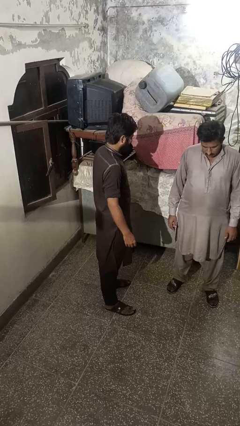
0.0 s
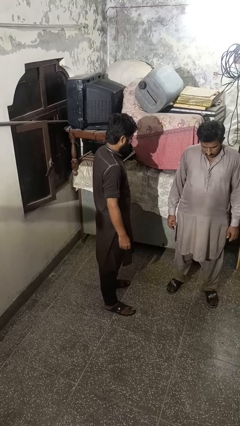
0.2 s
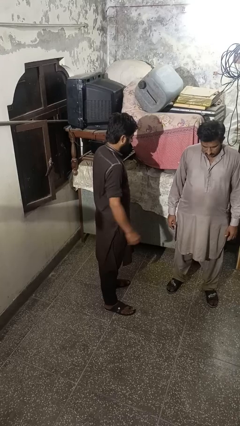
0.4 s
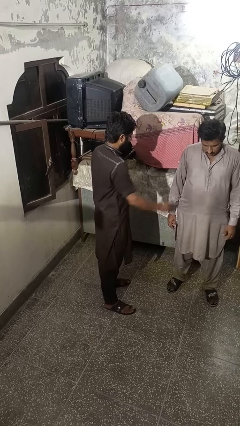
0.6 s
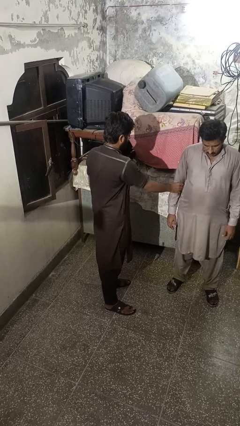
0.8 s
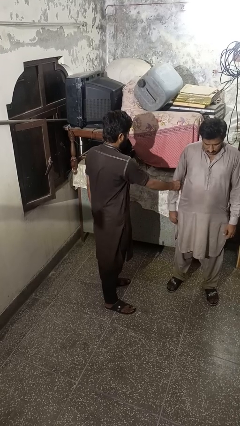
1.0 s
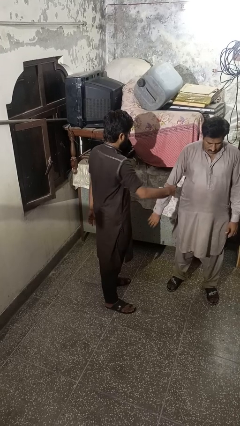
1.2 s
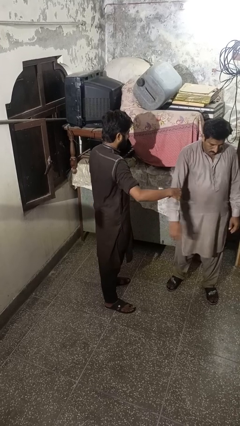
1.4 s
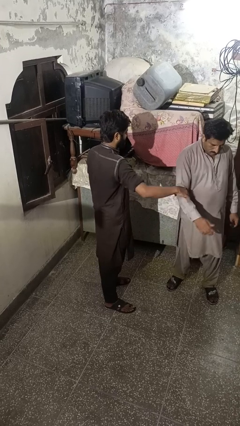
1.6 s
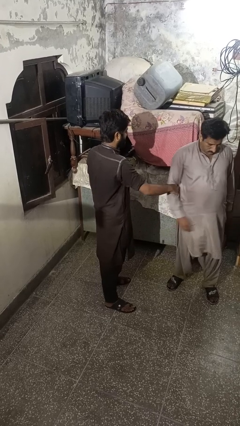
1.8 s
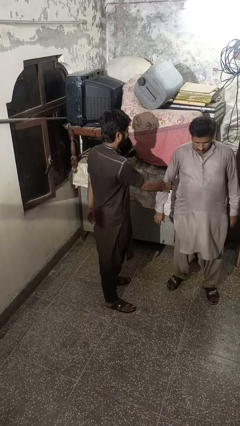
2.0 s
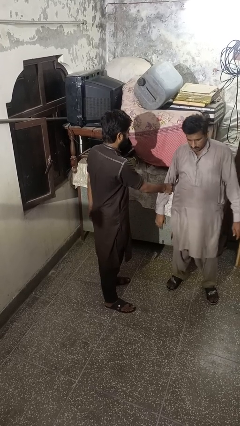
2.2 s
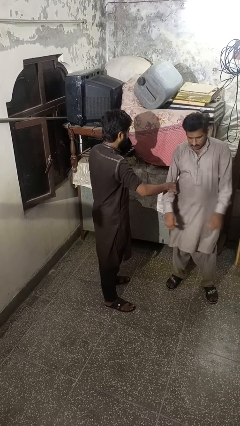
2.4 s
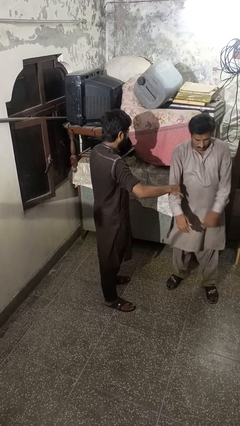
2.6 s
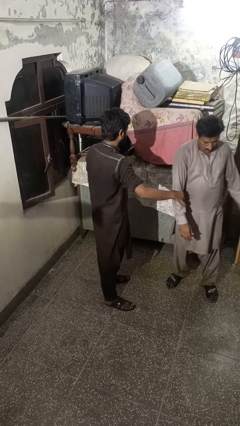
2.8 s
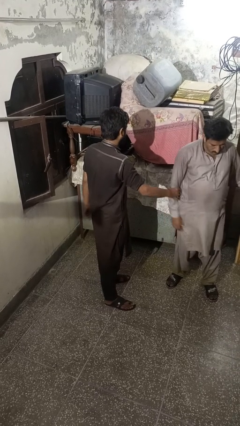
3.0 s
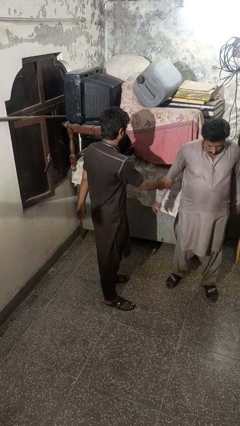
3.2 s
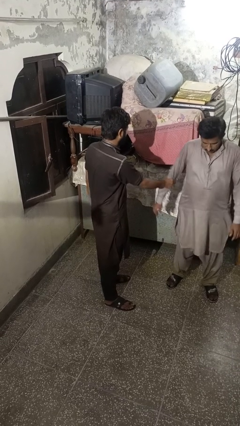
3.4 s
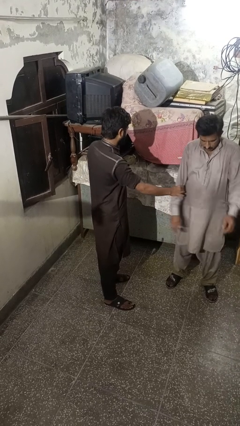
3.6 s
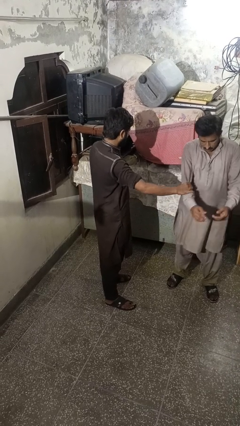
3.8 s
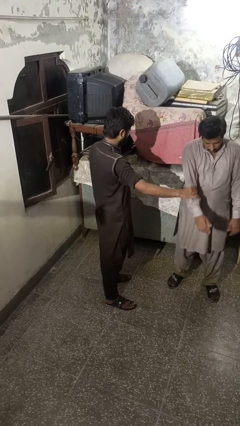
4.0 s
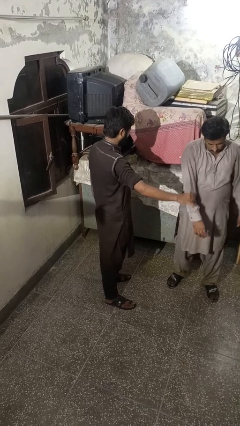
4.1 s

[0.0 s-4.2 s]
person grabs person by forearm

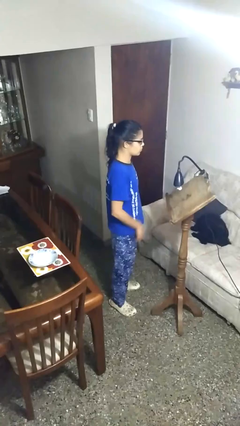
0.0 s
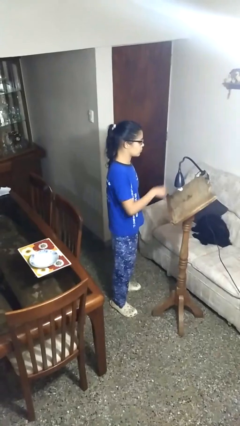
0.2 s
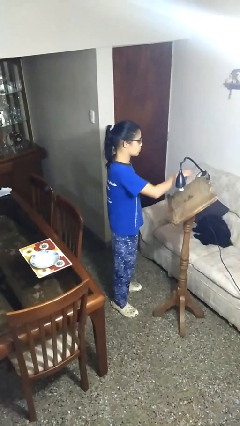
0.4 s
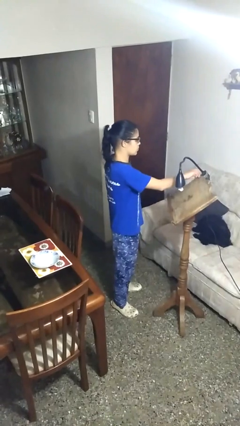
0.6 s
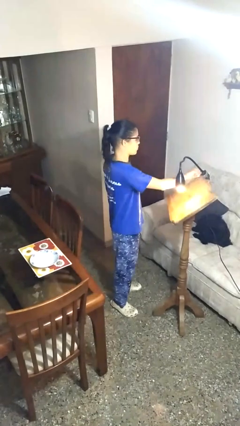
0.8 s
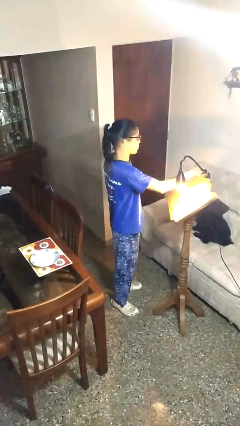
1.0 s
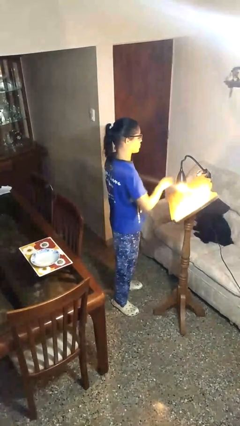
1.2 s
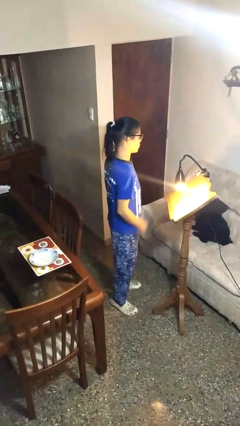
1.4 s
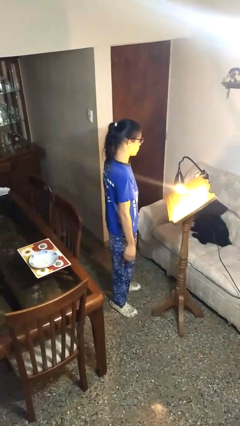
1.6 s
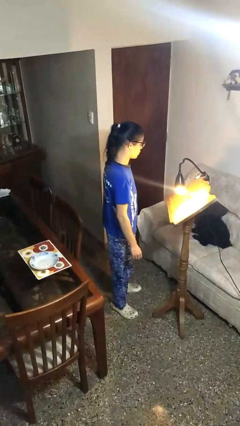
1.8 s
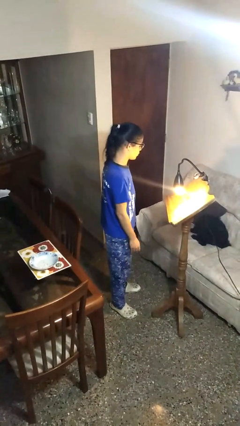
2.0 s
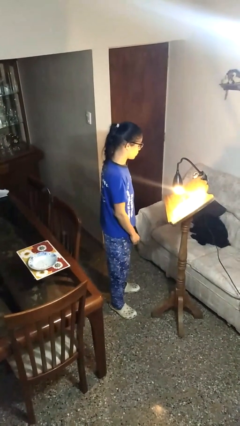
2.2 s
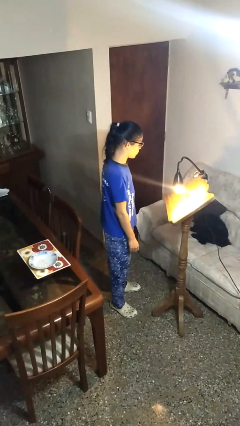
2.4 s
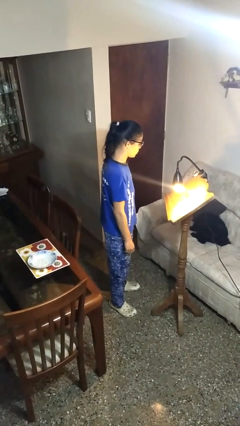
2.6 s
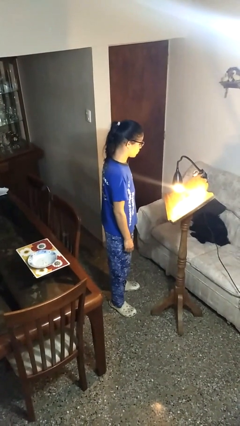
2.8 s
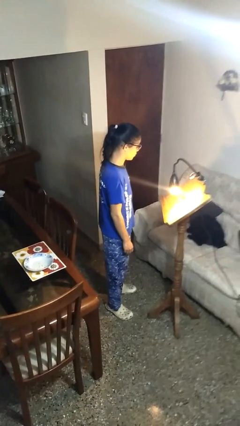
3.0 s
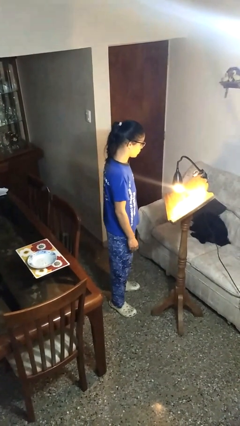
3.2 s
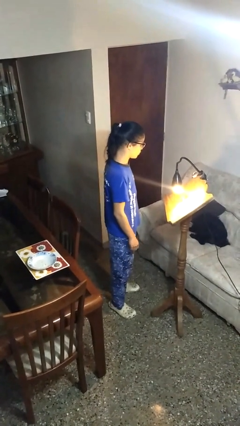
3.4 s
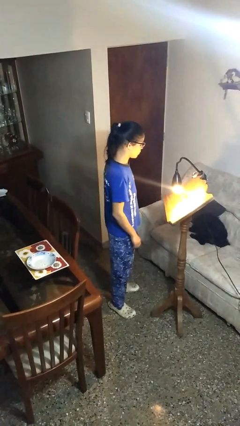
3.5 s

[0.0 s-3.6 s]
person turns on lamp

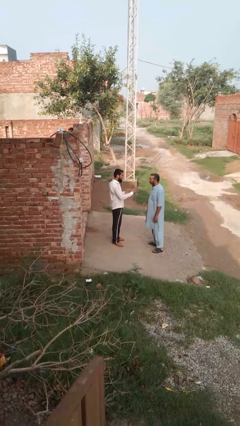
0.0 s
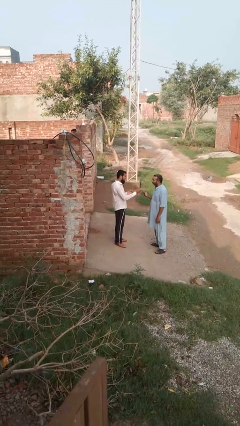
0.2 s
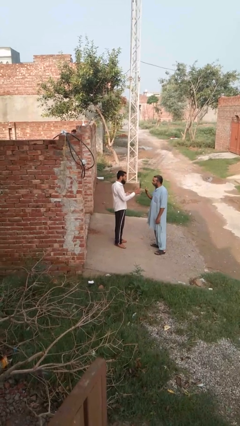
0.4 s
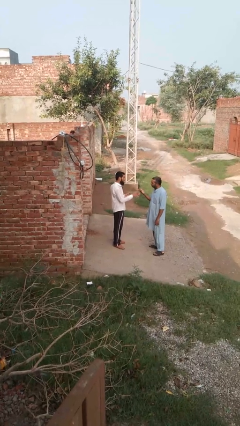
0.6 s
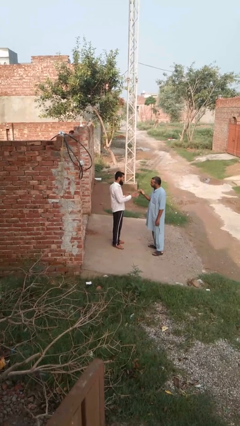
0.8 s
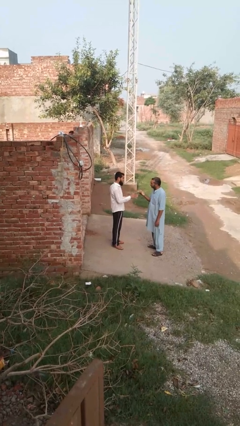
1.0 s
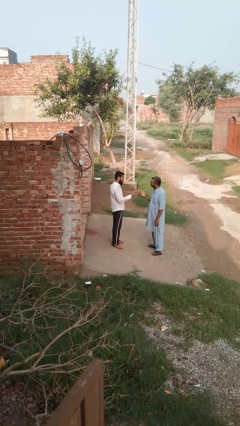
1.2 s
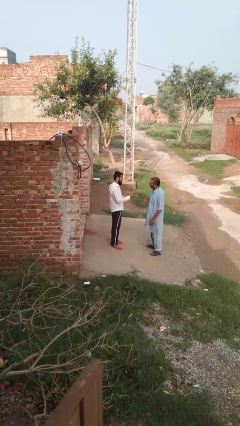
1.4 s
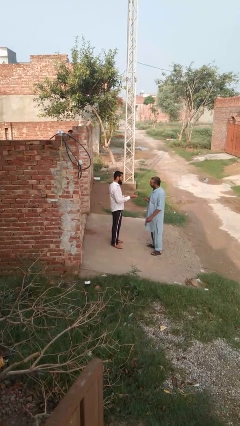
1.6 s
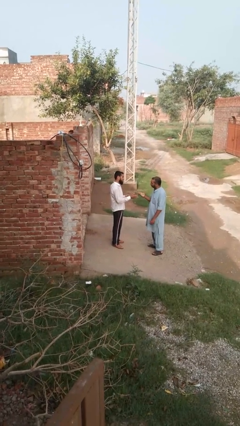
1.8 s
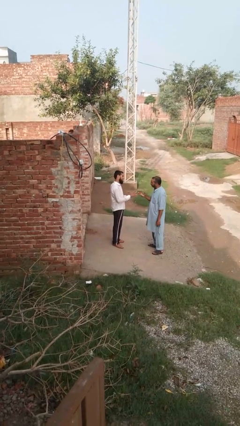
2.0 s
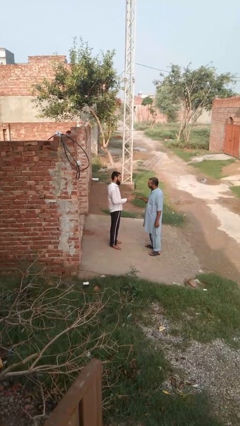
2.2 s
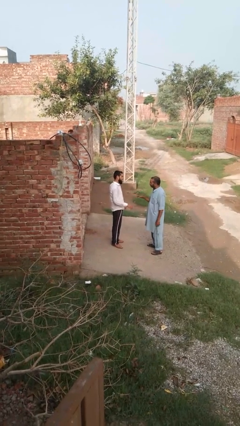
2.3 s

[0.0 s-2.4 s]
person talks to person

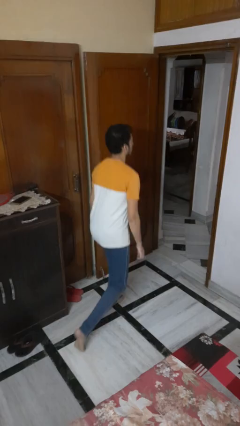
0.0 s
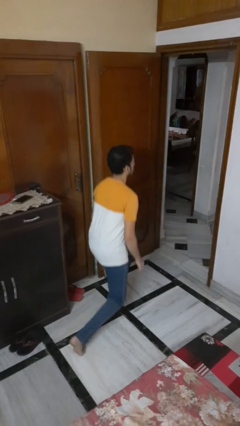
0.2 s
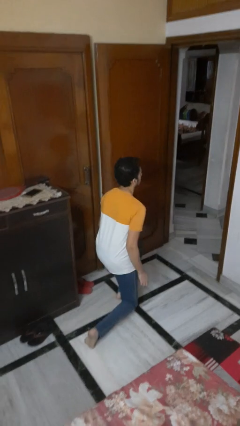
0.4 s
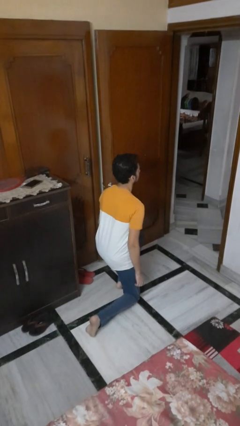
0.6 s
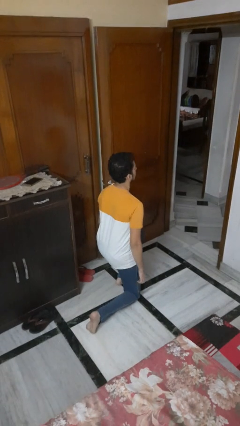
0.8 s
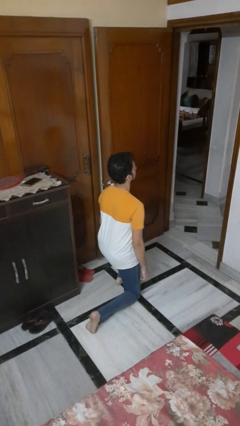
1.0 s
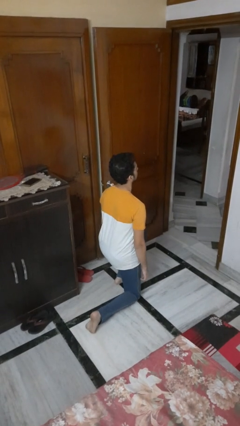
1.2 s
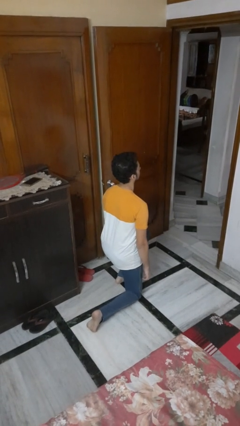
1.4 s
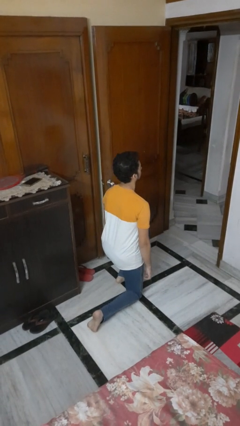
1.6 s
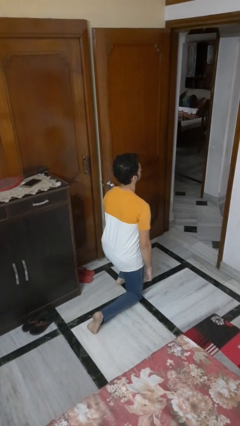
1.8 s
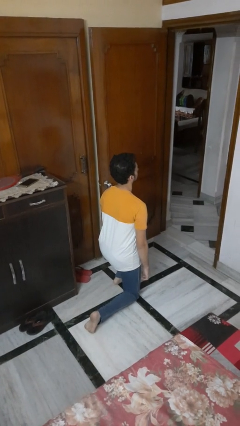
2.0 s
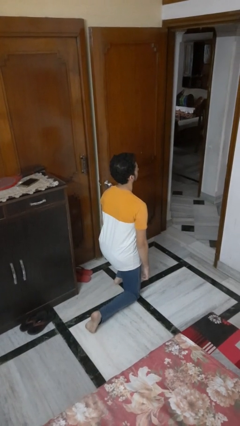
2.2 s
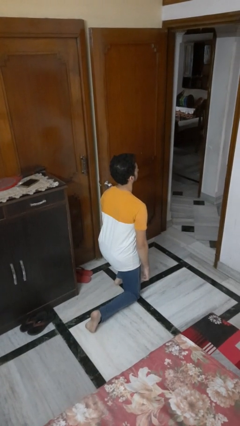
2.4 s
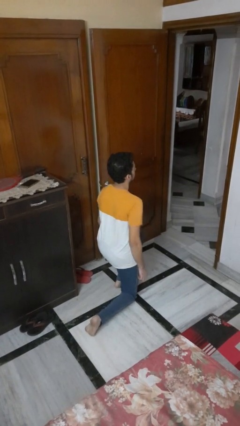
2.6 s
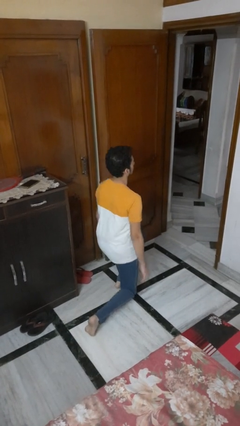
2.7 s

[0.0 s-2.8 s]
person kneels

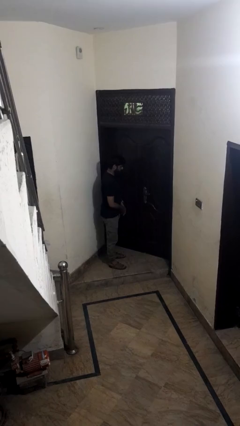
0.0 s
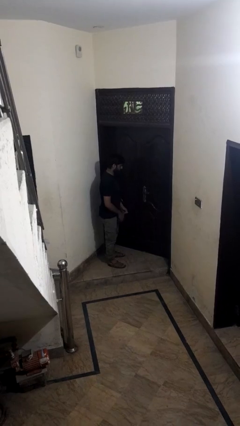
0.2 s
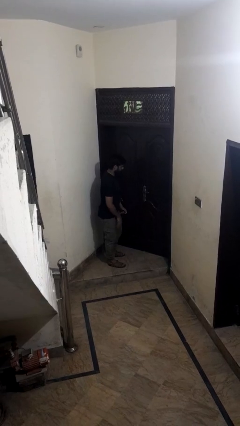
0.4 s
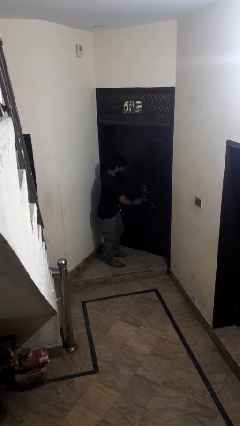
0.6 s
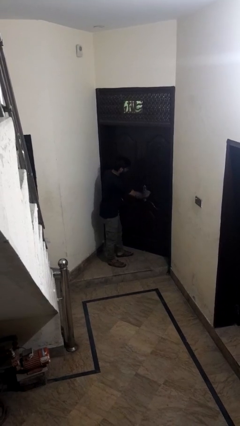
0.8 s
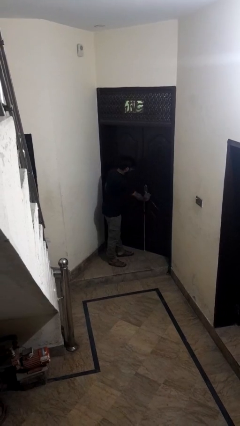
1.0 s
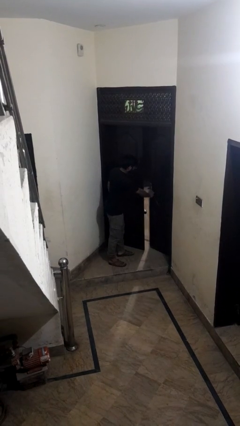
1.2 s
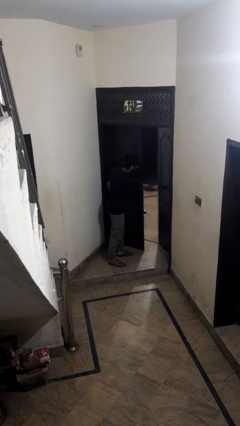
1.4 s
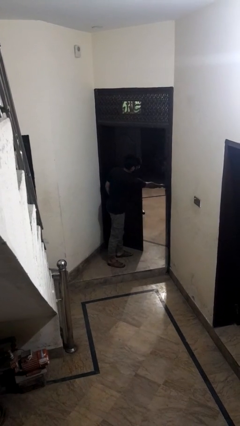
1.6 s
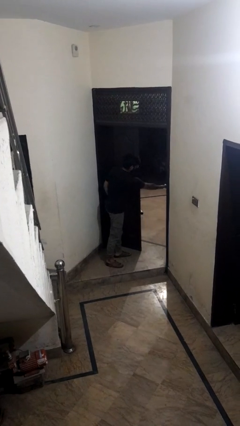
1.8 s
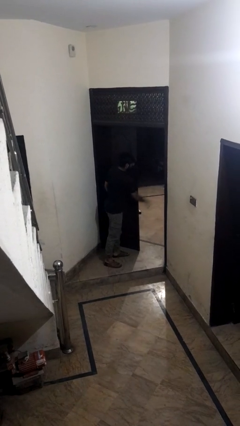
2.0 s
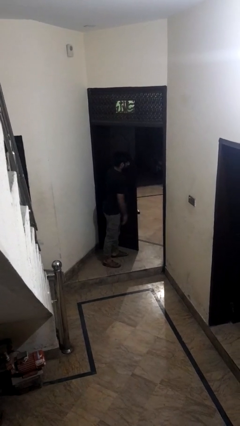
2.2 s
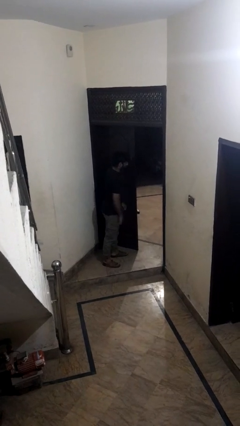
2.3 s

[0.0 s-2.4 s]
person opens facility door

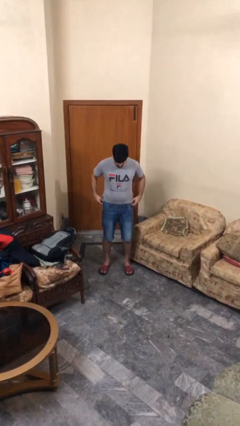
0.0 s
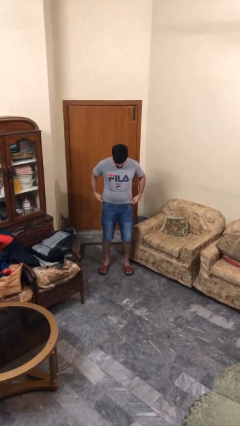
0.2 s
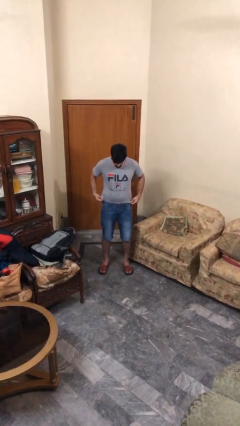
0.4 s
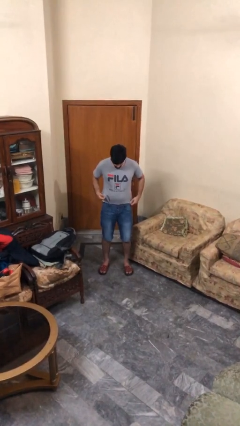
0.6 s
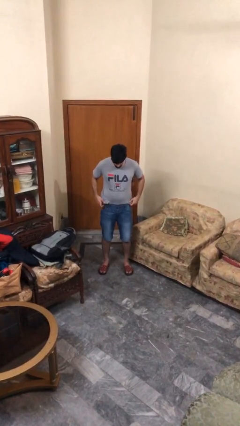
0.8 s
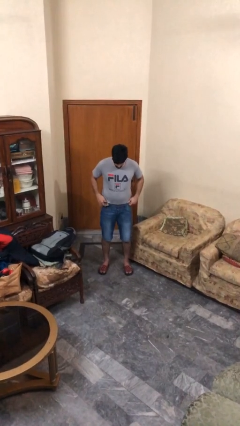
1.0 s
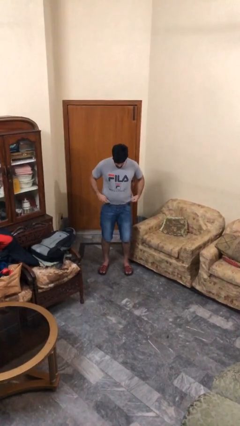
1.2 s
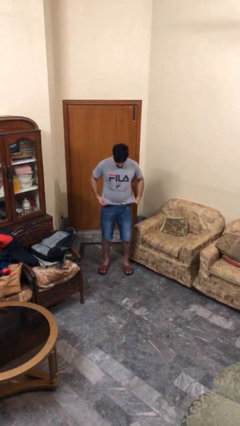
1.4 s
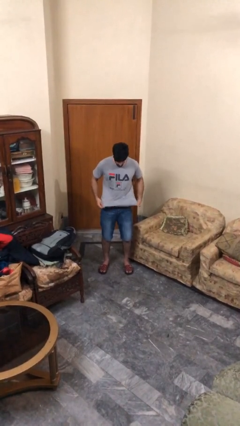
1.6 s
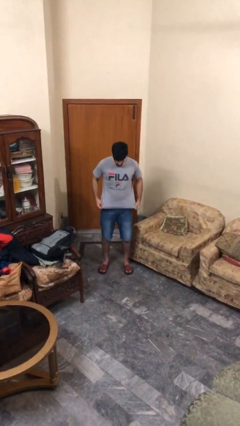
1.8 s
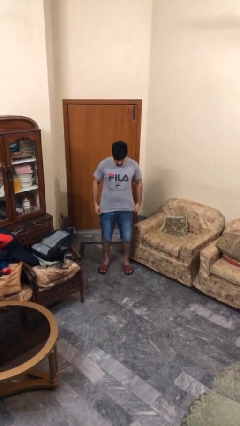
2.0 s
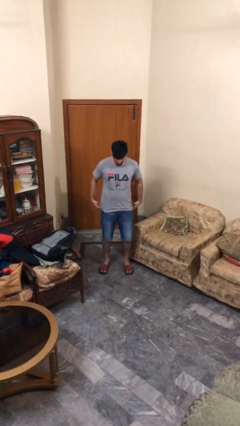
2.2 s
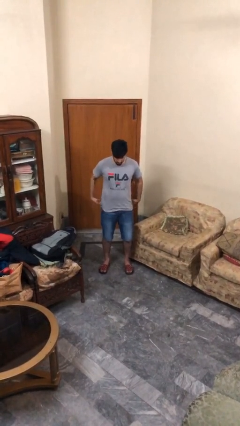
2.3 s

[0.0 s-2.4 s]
person untucks shirt
